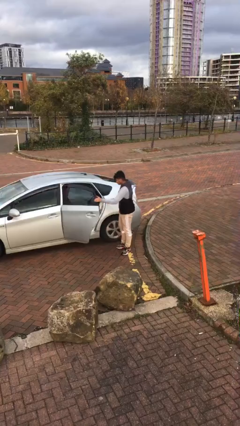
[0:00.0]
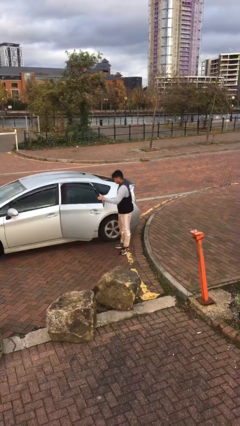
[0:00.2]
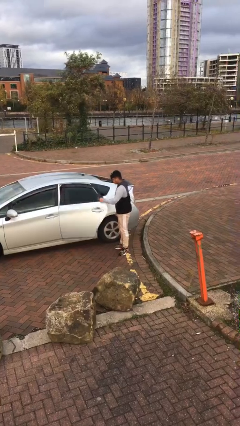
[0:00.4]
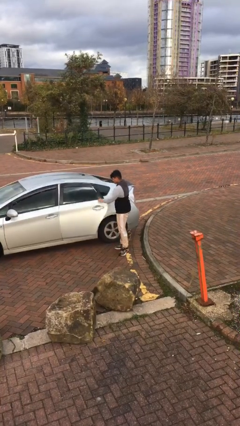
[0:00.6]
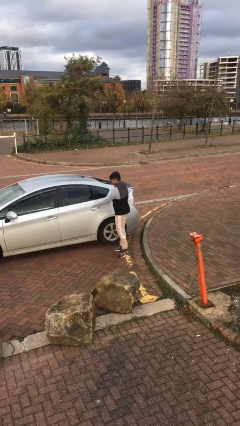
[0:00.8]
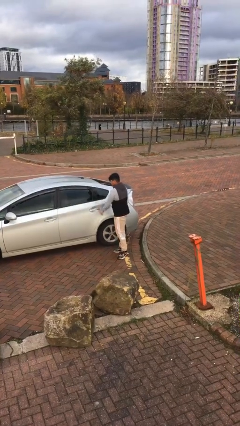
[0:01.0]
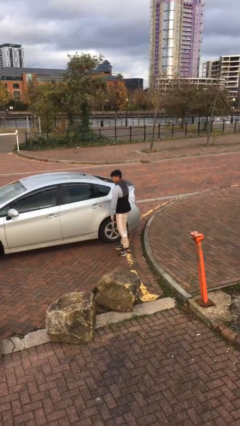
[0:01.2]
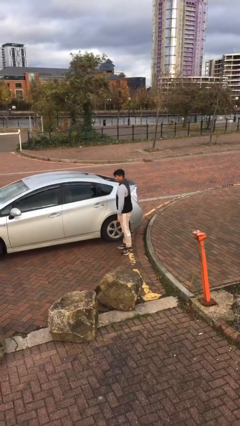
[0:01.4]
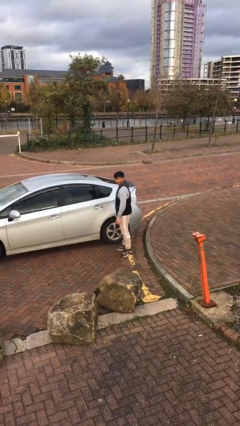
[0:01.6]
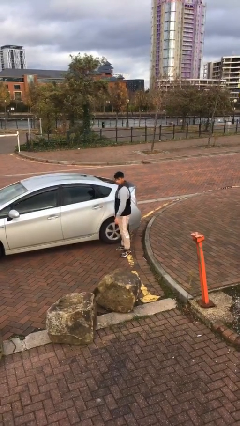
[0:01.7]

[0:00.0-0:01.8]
person closes car door

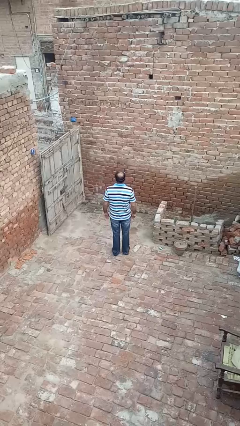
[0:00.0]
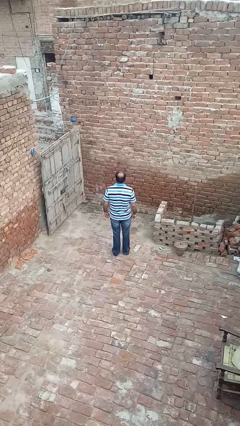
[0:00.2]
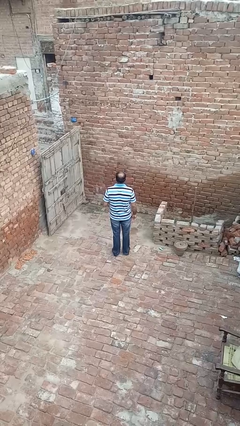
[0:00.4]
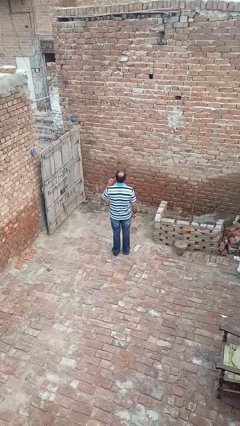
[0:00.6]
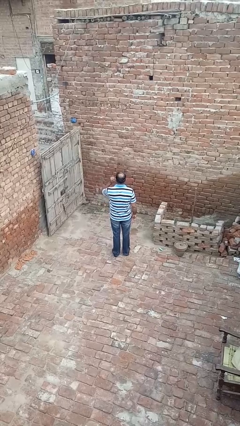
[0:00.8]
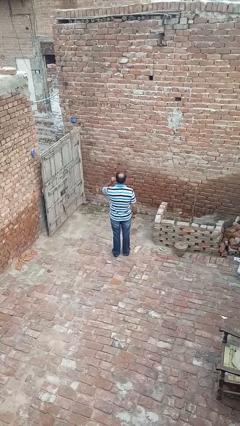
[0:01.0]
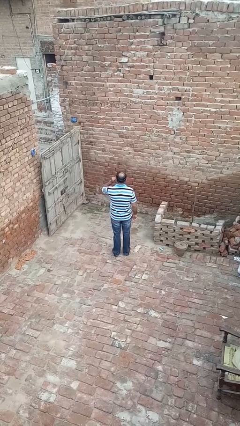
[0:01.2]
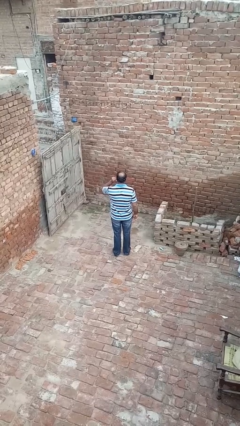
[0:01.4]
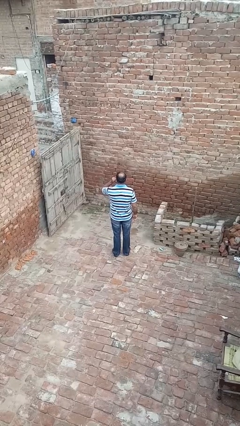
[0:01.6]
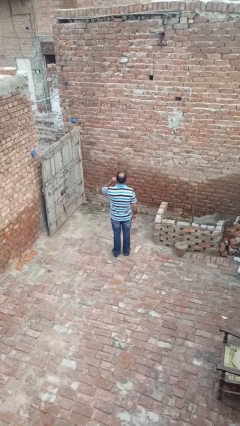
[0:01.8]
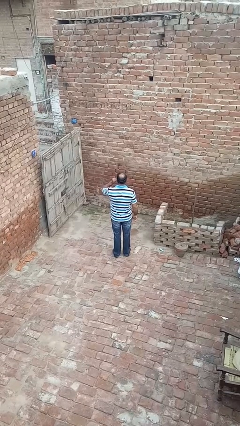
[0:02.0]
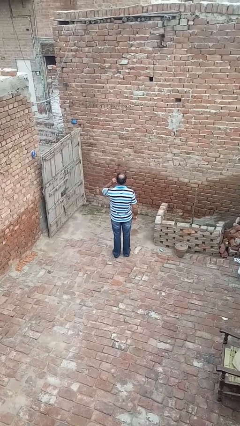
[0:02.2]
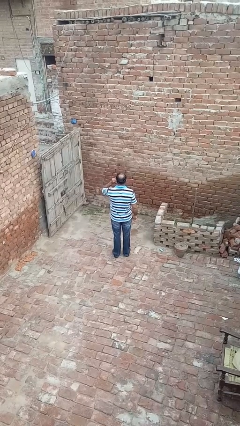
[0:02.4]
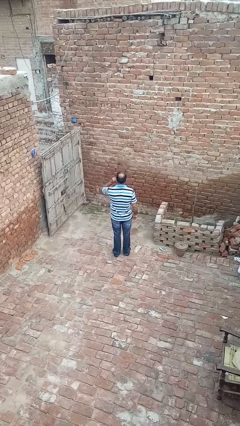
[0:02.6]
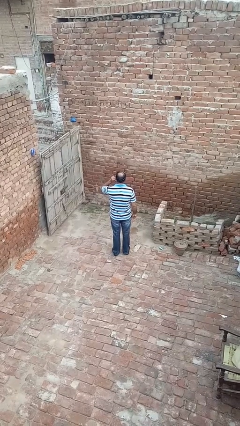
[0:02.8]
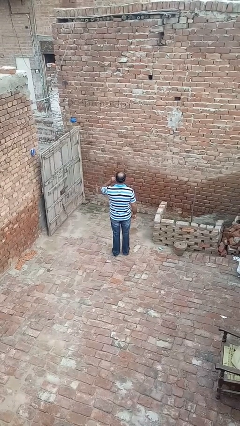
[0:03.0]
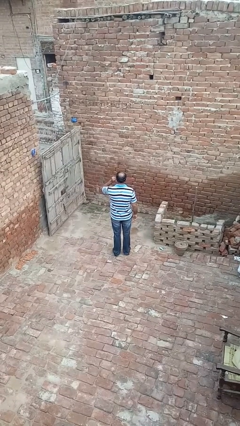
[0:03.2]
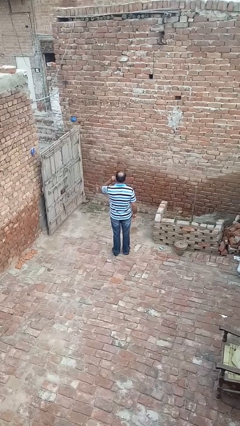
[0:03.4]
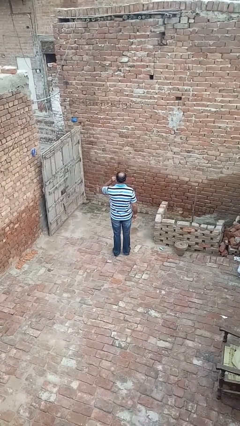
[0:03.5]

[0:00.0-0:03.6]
person touches earlobe

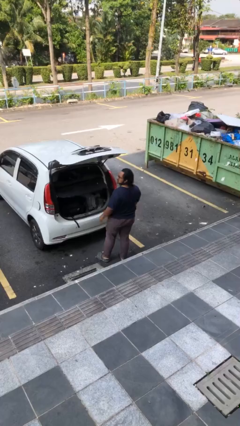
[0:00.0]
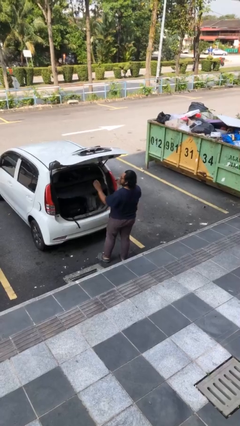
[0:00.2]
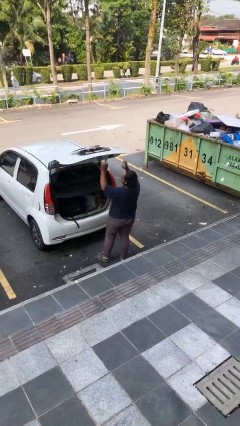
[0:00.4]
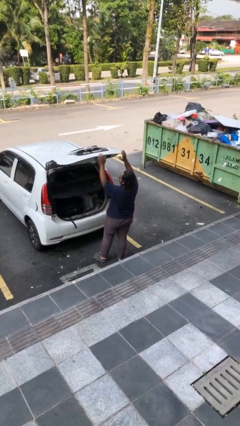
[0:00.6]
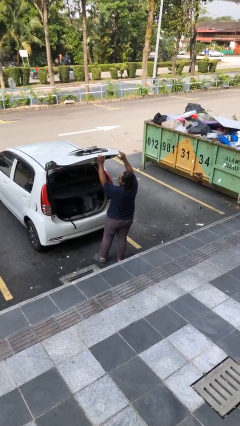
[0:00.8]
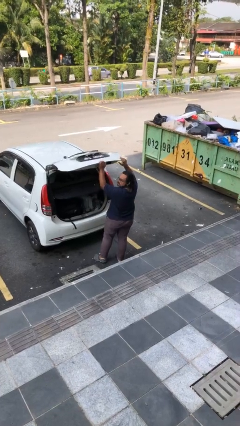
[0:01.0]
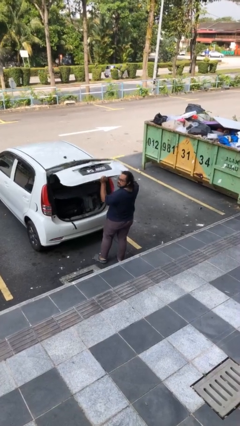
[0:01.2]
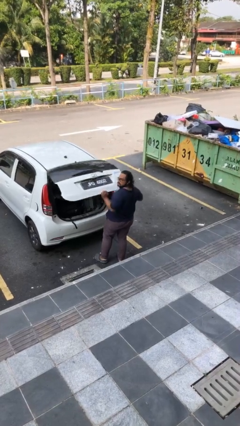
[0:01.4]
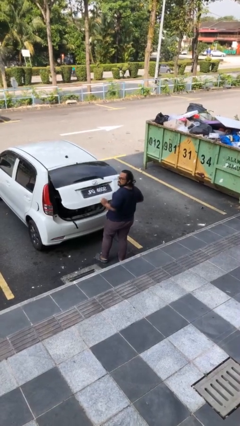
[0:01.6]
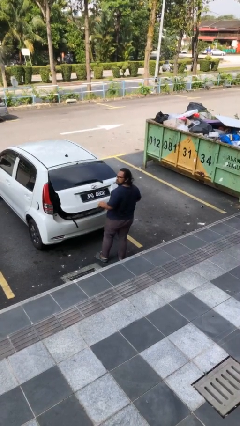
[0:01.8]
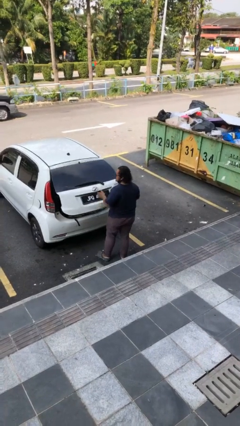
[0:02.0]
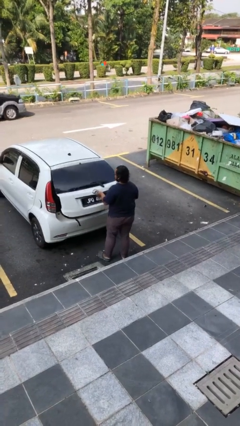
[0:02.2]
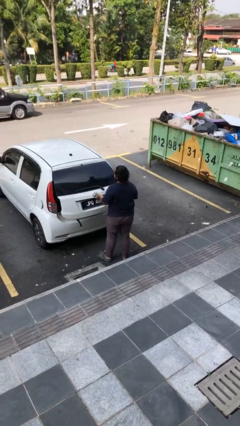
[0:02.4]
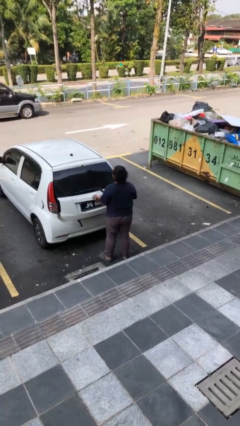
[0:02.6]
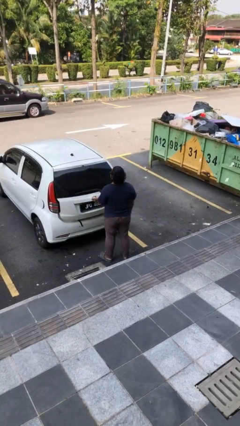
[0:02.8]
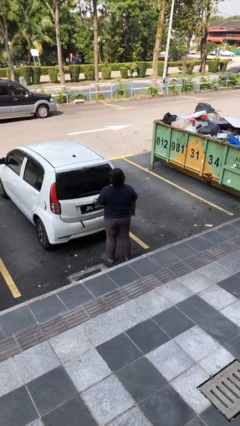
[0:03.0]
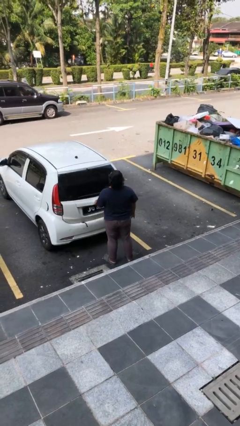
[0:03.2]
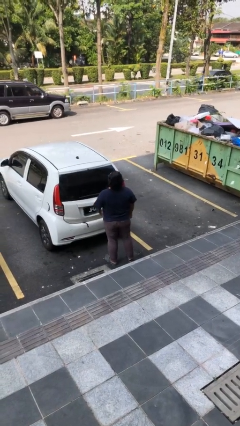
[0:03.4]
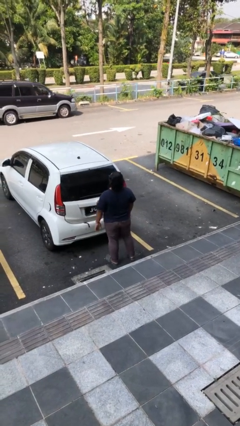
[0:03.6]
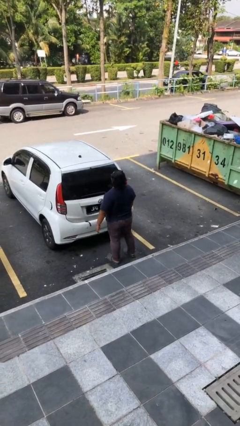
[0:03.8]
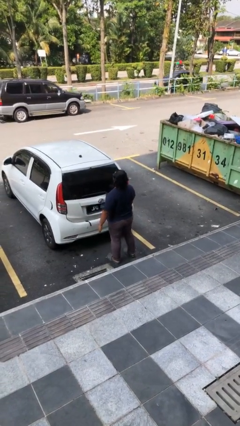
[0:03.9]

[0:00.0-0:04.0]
person closes car trunk

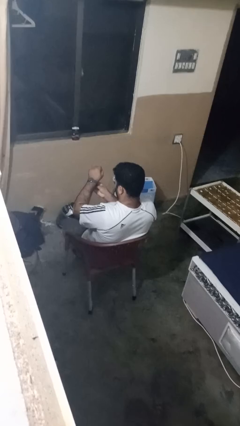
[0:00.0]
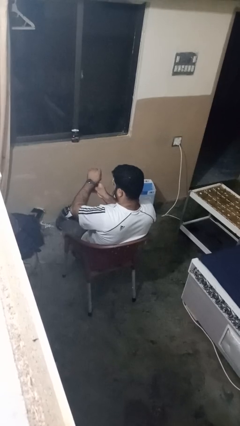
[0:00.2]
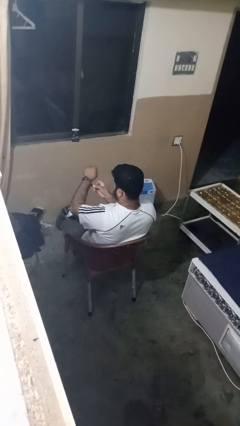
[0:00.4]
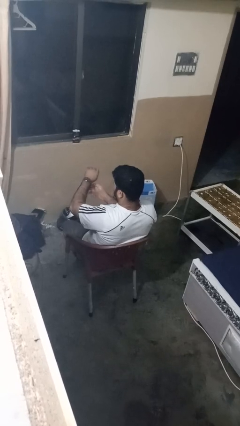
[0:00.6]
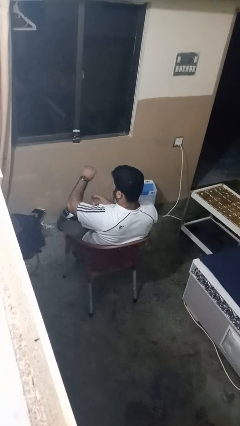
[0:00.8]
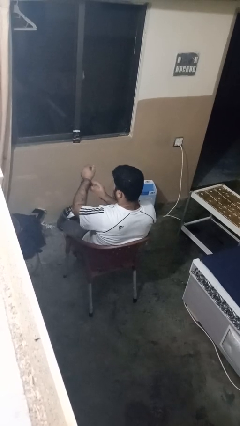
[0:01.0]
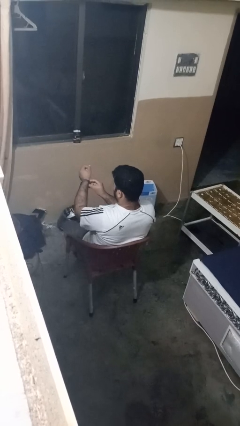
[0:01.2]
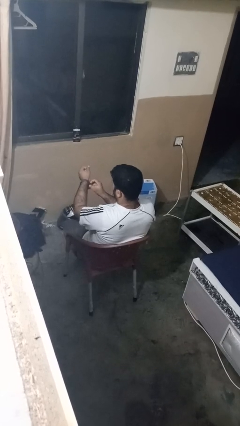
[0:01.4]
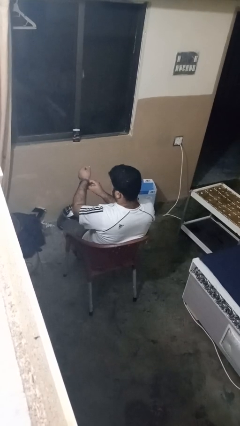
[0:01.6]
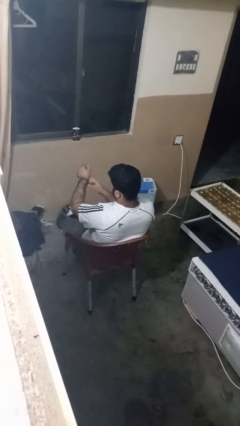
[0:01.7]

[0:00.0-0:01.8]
person takes off wristwatch

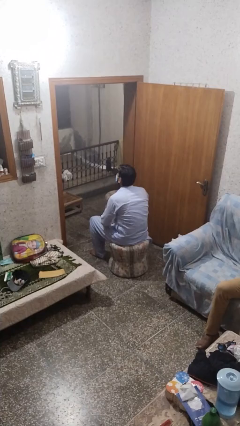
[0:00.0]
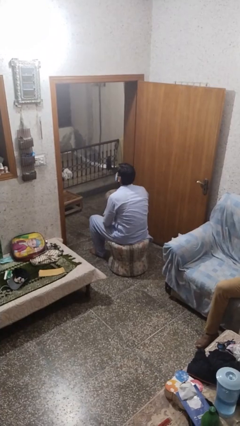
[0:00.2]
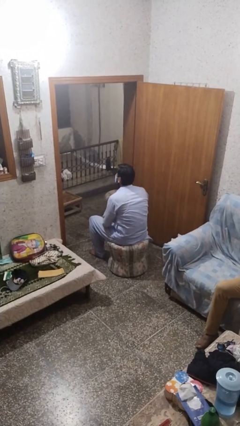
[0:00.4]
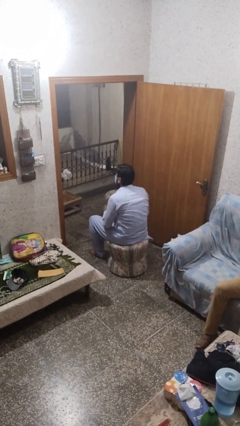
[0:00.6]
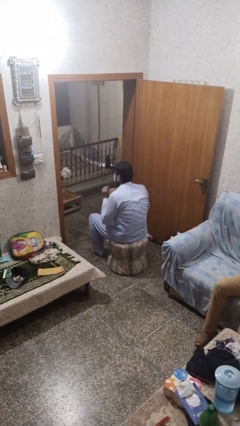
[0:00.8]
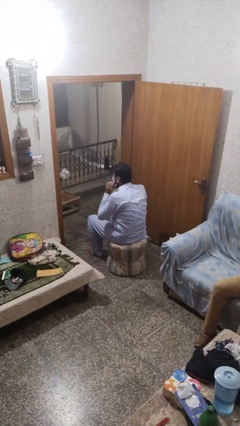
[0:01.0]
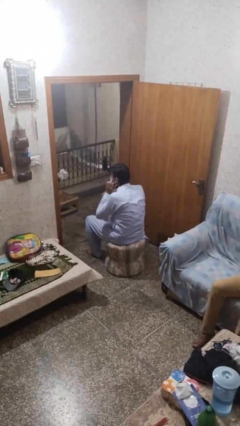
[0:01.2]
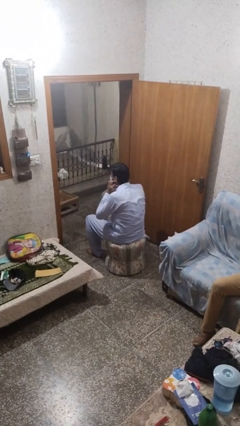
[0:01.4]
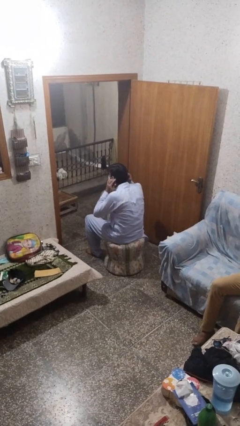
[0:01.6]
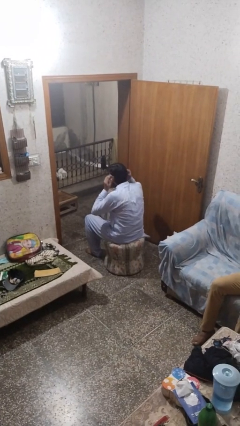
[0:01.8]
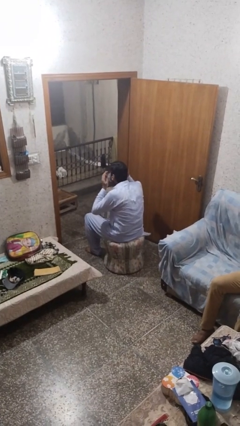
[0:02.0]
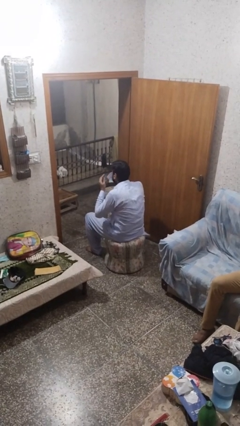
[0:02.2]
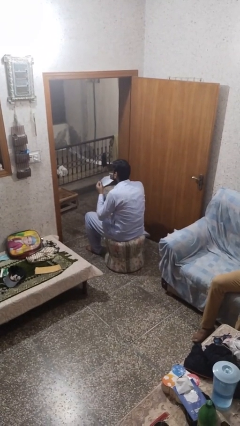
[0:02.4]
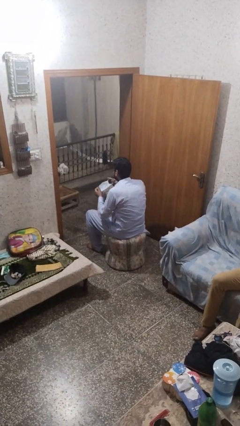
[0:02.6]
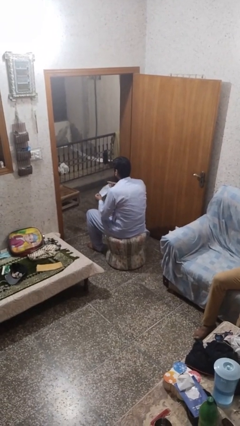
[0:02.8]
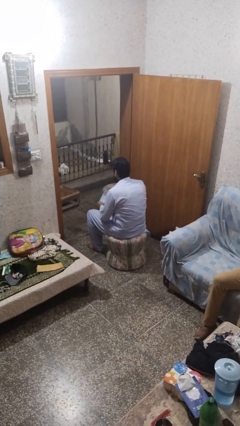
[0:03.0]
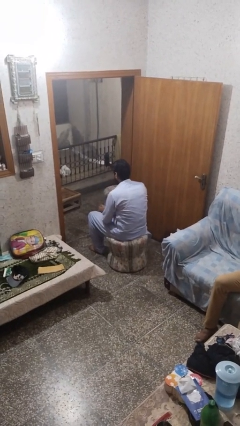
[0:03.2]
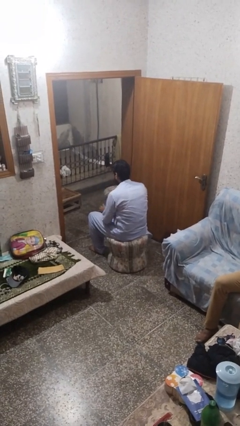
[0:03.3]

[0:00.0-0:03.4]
person takes off facemask

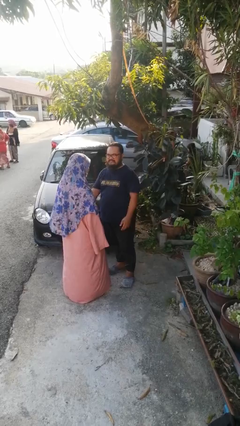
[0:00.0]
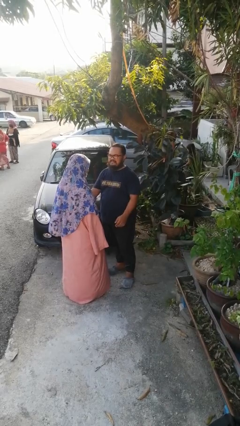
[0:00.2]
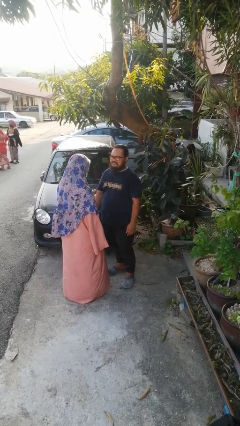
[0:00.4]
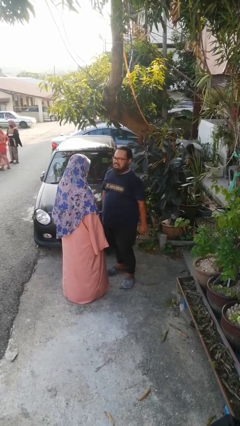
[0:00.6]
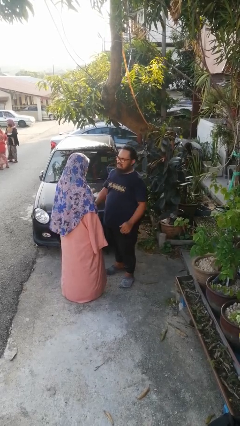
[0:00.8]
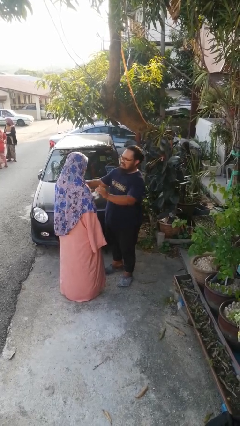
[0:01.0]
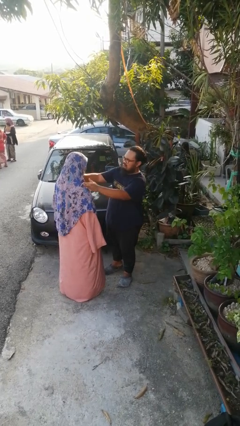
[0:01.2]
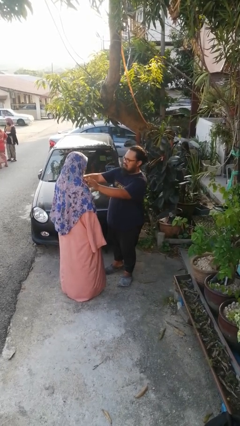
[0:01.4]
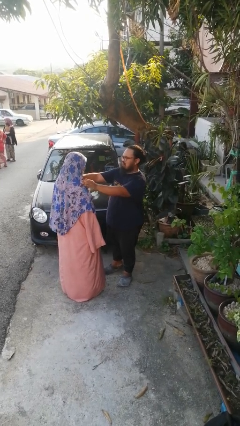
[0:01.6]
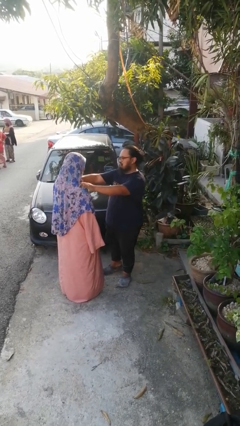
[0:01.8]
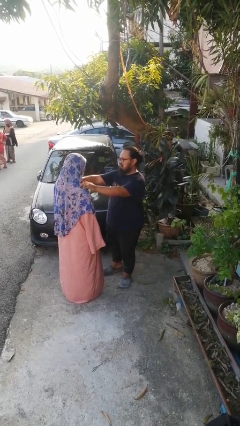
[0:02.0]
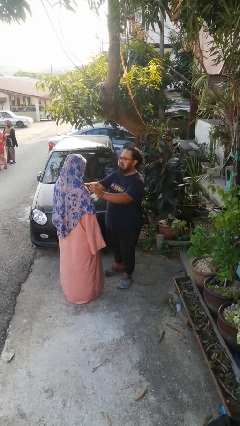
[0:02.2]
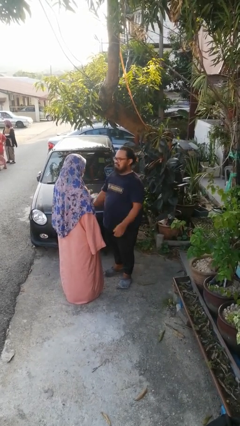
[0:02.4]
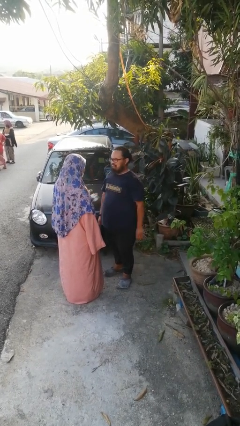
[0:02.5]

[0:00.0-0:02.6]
person pounds shoulders of person

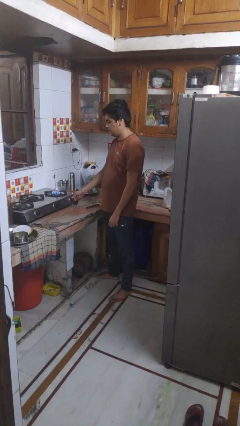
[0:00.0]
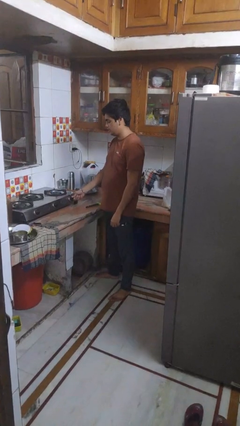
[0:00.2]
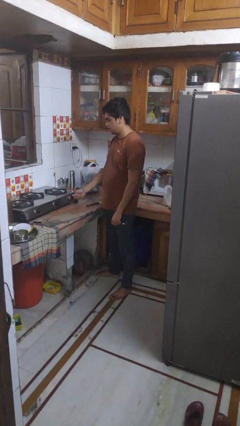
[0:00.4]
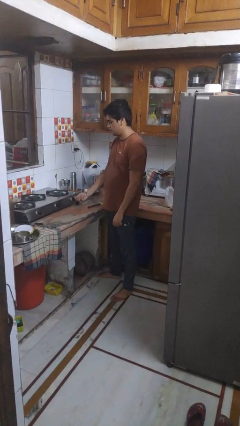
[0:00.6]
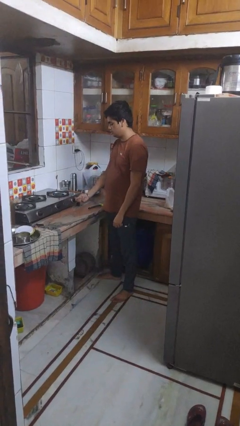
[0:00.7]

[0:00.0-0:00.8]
person turns off stovetop
